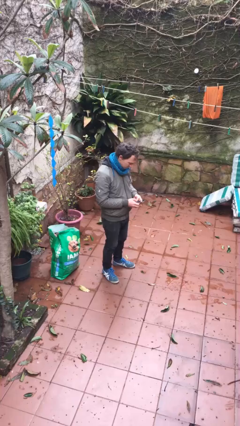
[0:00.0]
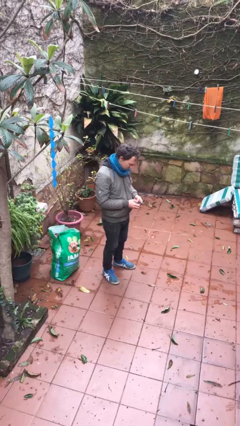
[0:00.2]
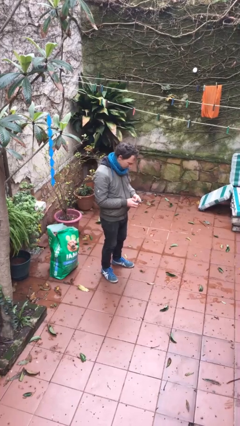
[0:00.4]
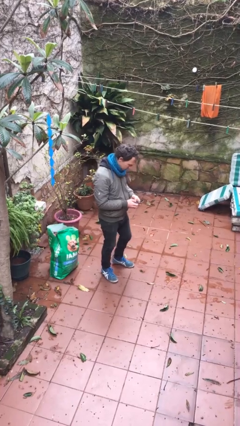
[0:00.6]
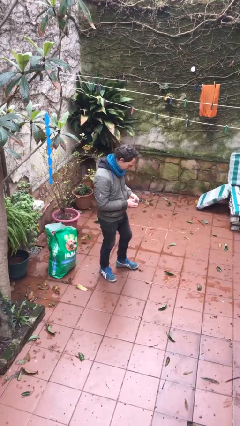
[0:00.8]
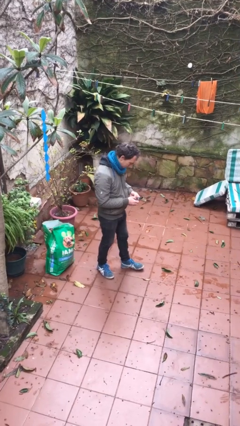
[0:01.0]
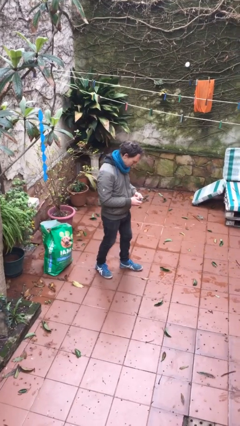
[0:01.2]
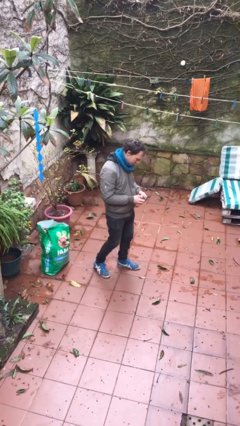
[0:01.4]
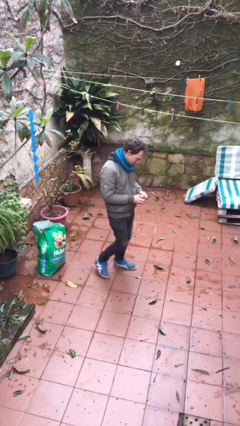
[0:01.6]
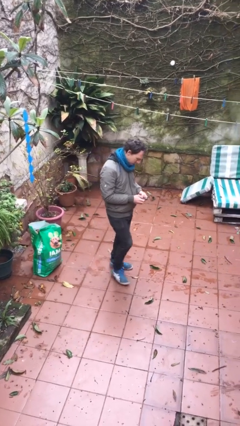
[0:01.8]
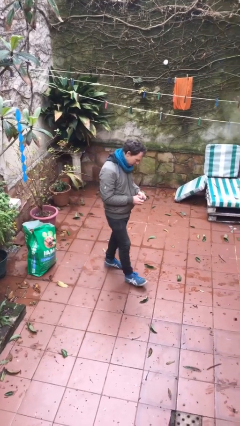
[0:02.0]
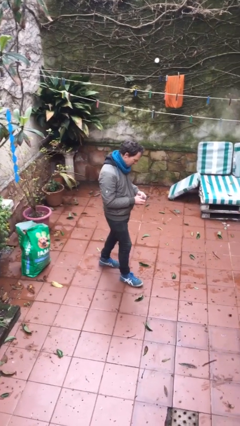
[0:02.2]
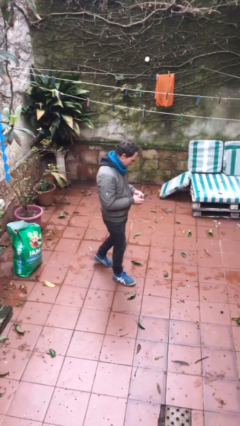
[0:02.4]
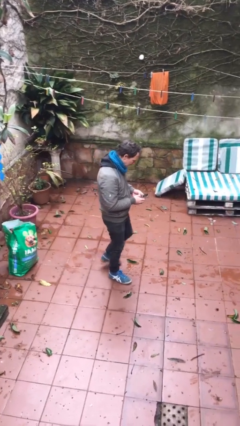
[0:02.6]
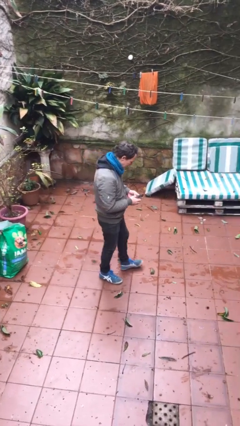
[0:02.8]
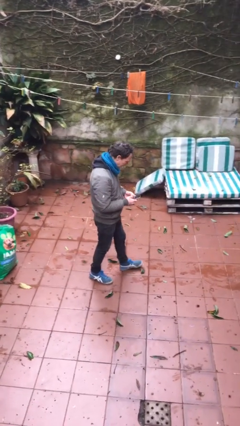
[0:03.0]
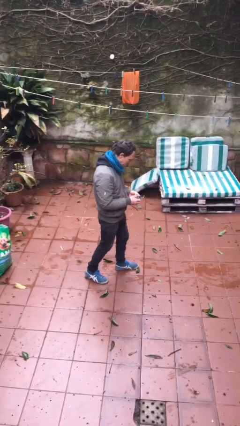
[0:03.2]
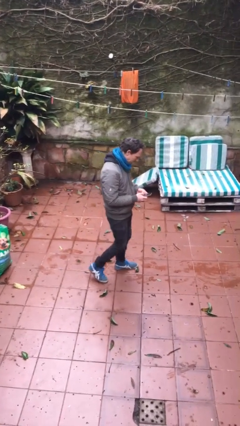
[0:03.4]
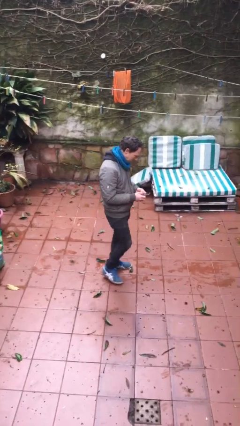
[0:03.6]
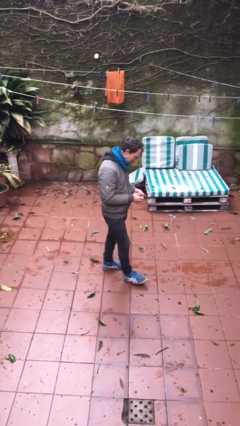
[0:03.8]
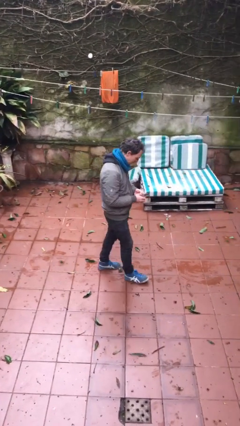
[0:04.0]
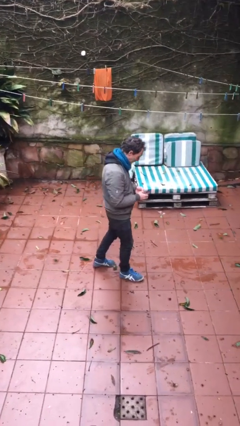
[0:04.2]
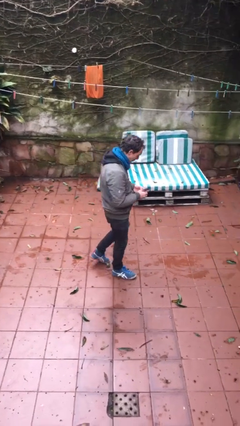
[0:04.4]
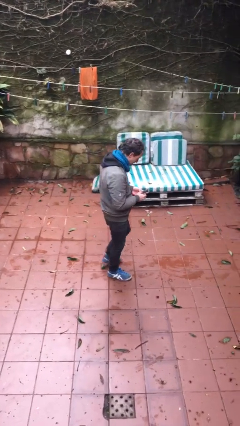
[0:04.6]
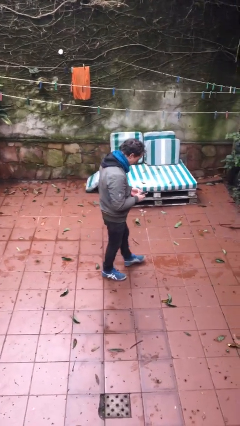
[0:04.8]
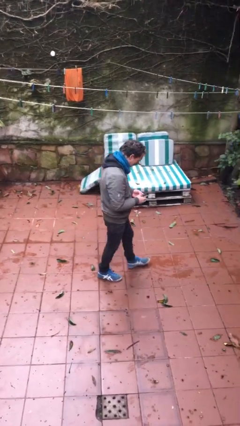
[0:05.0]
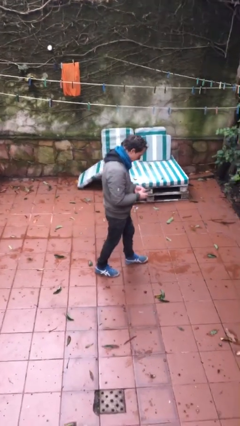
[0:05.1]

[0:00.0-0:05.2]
person texts on phone

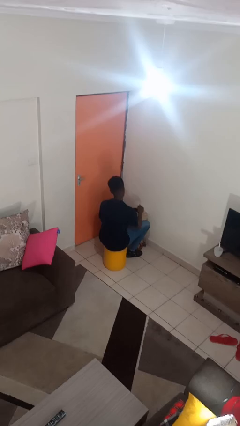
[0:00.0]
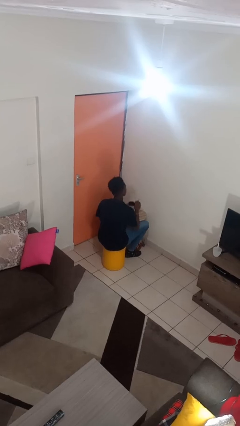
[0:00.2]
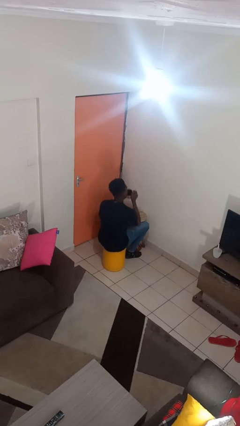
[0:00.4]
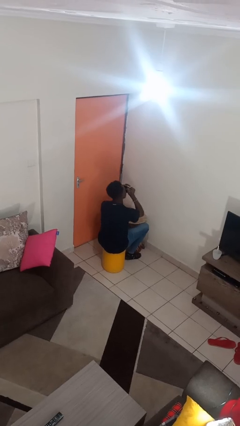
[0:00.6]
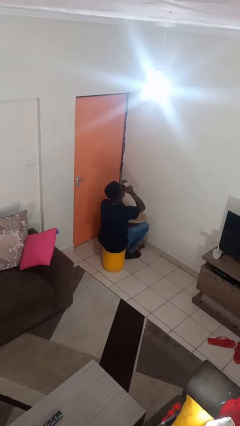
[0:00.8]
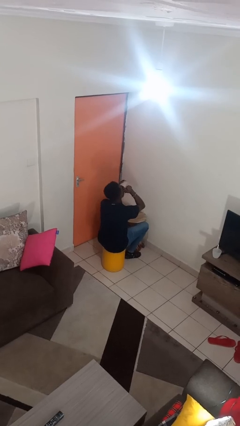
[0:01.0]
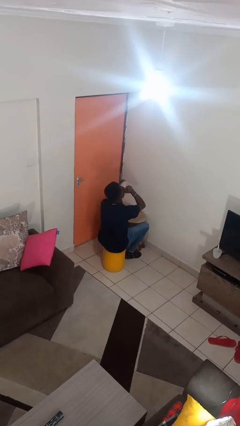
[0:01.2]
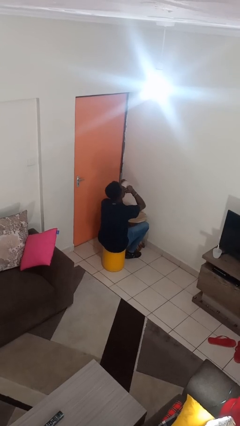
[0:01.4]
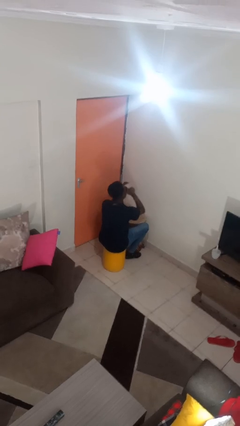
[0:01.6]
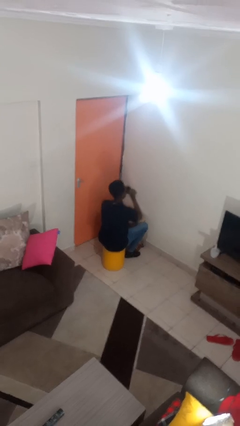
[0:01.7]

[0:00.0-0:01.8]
person drinks from mug

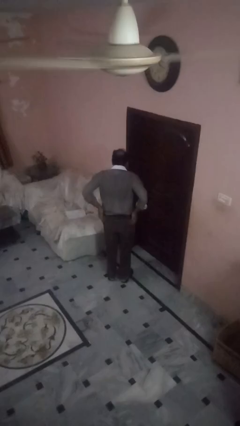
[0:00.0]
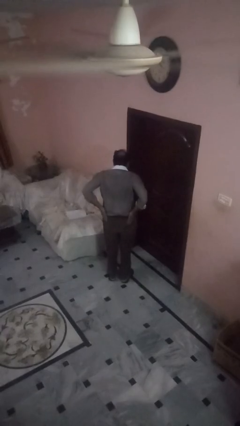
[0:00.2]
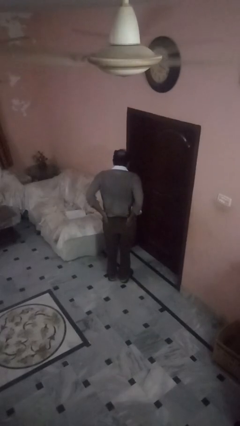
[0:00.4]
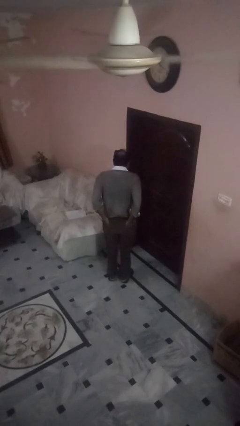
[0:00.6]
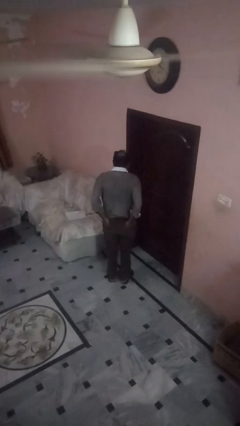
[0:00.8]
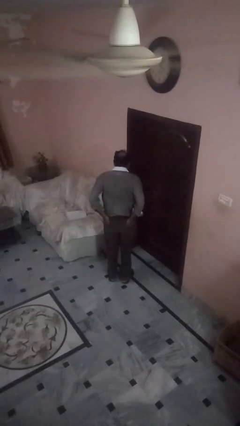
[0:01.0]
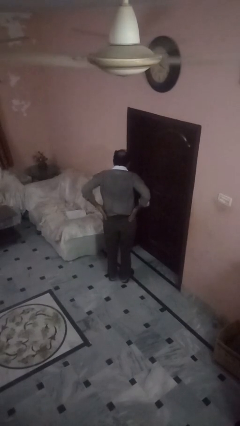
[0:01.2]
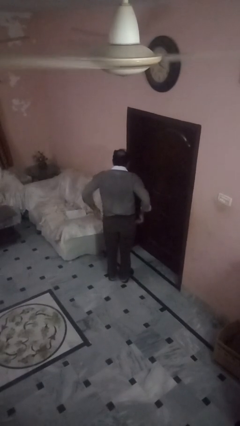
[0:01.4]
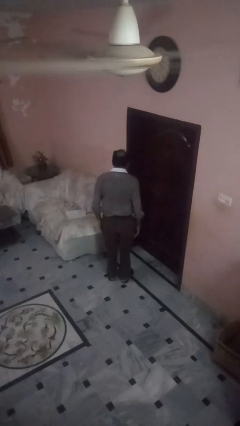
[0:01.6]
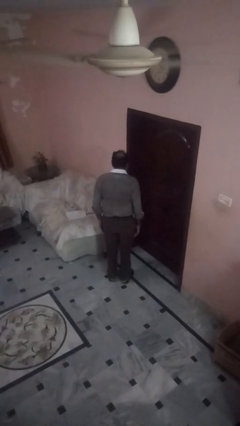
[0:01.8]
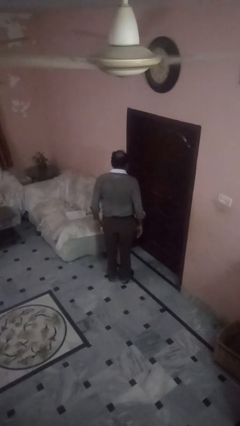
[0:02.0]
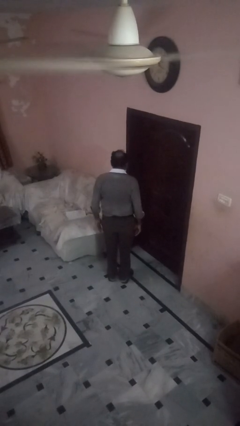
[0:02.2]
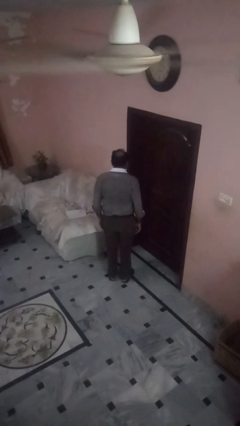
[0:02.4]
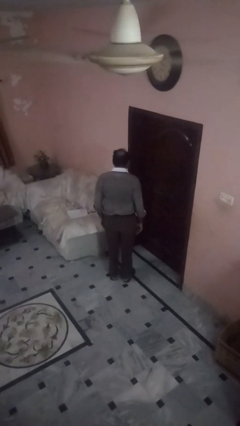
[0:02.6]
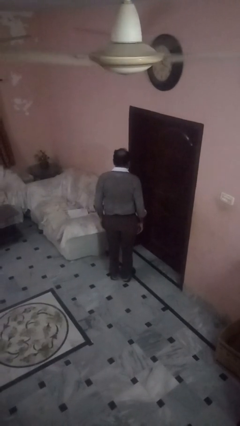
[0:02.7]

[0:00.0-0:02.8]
person puts hands in back pockets

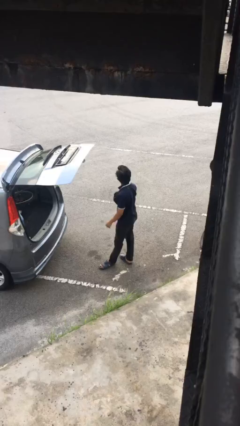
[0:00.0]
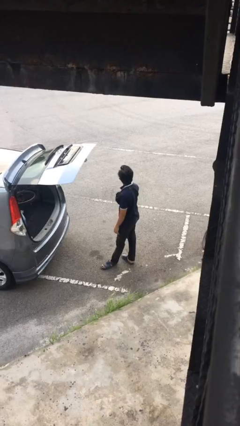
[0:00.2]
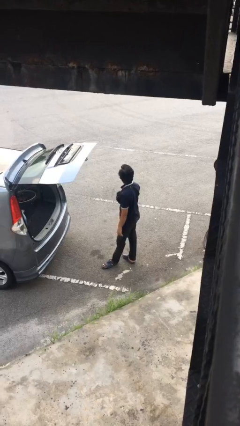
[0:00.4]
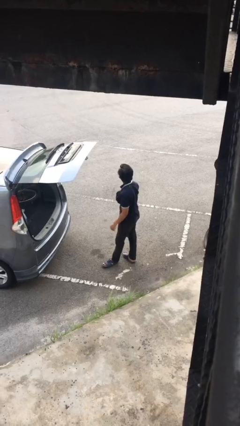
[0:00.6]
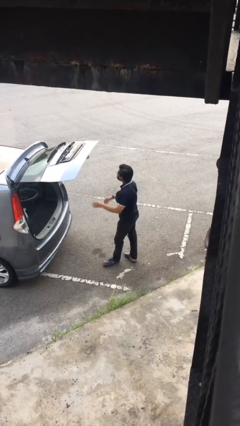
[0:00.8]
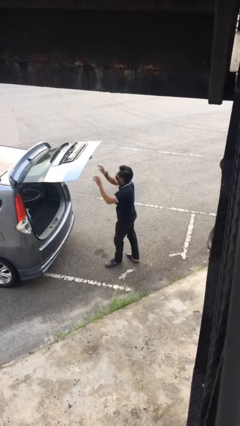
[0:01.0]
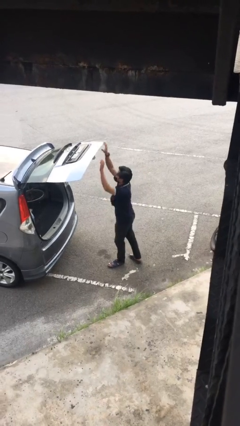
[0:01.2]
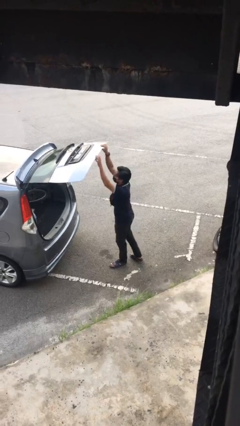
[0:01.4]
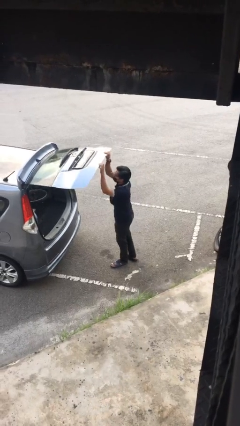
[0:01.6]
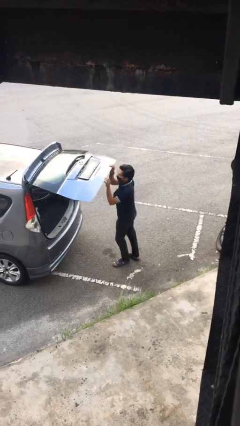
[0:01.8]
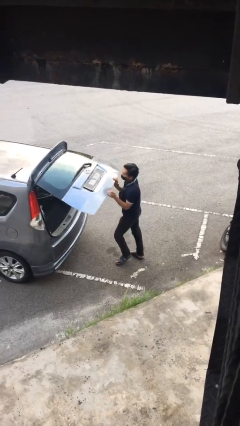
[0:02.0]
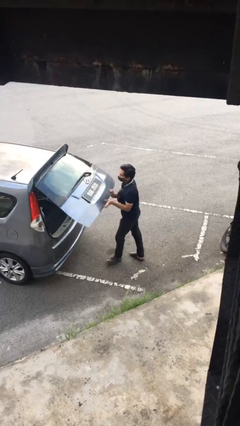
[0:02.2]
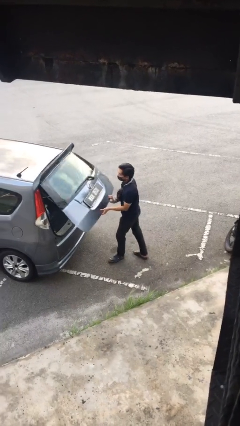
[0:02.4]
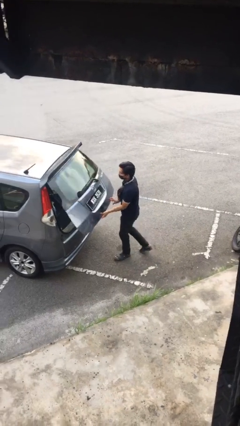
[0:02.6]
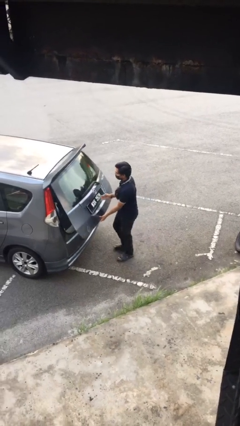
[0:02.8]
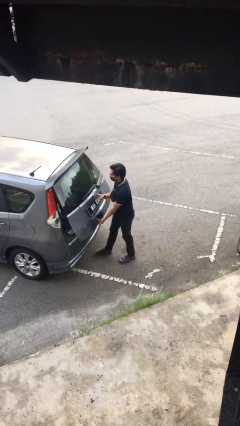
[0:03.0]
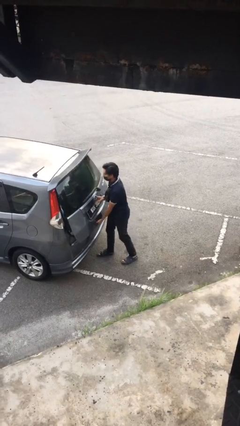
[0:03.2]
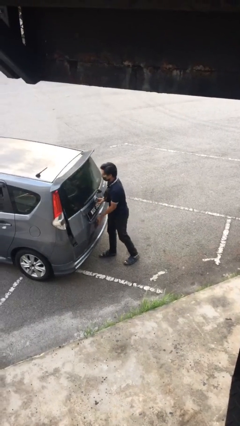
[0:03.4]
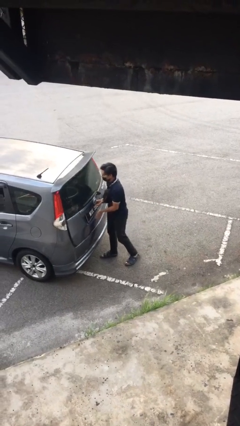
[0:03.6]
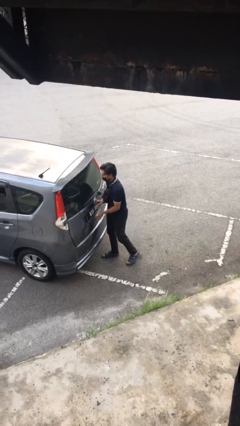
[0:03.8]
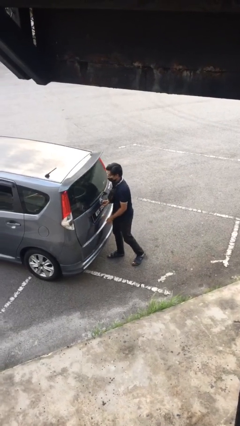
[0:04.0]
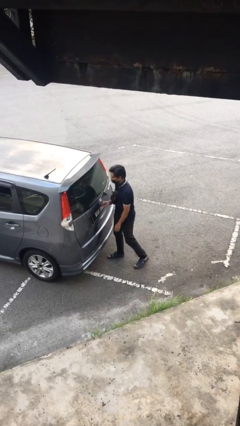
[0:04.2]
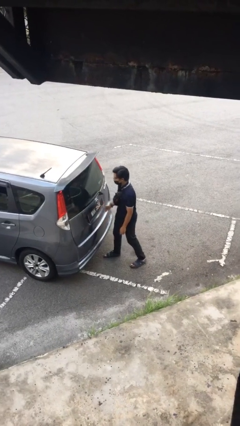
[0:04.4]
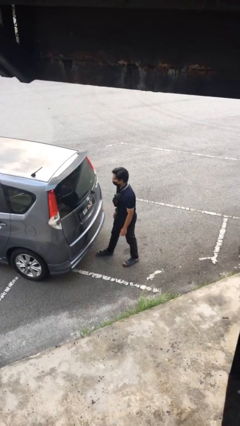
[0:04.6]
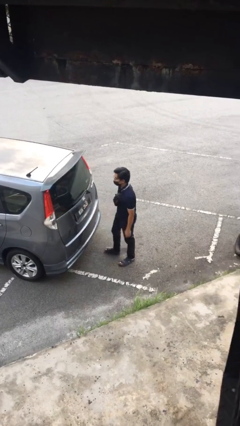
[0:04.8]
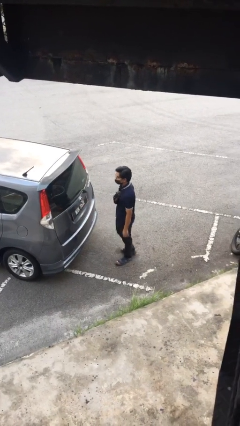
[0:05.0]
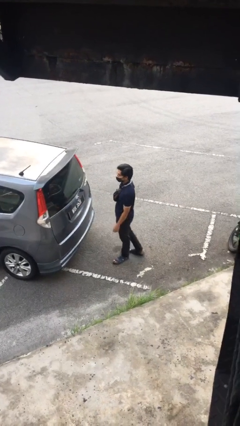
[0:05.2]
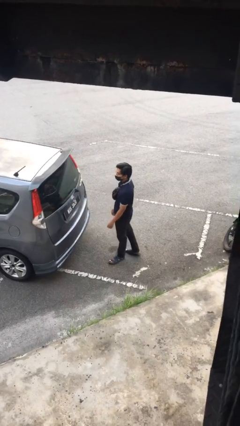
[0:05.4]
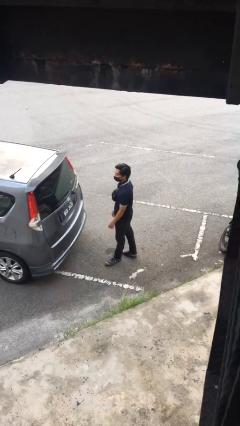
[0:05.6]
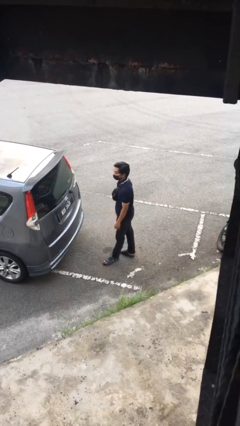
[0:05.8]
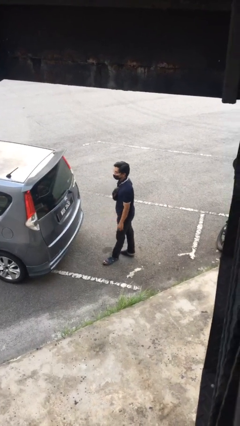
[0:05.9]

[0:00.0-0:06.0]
person closes car trunk

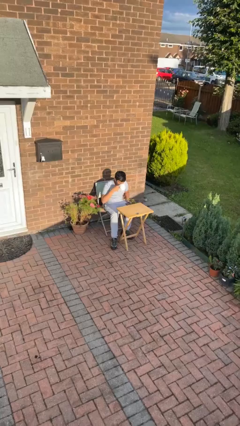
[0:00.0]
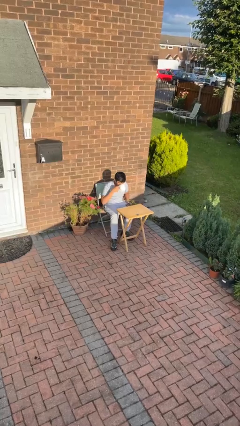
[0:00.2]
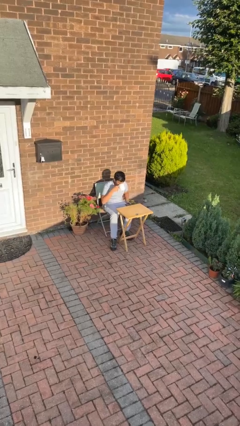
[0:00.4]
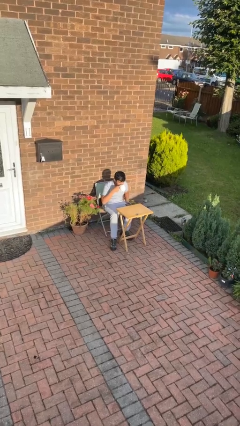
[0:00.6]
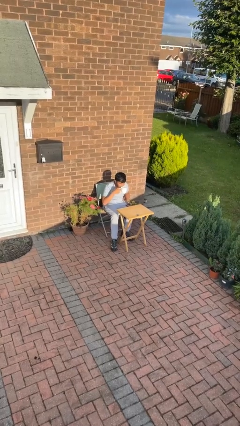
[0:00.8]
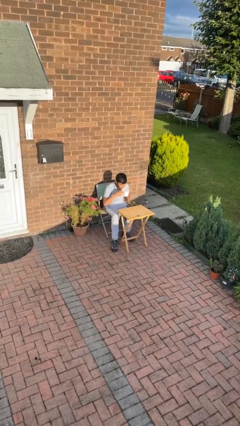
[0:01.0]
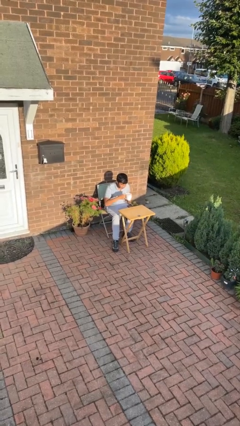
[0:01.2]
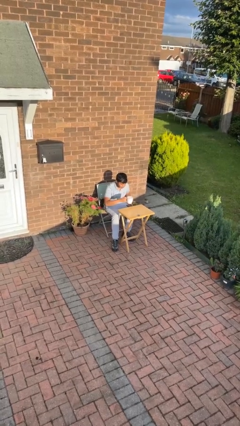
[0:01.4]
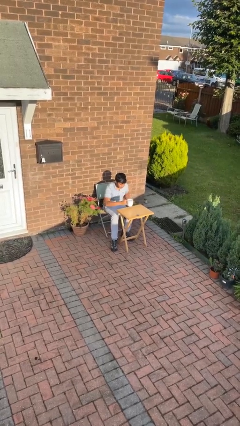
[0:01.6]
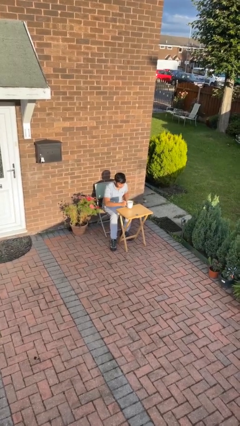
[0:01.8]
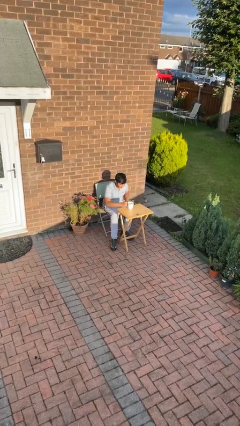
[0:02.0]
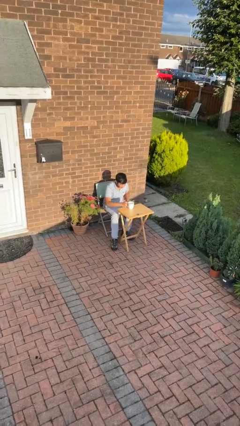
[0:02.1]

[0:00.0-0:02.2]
person puts down object on table
